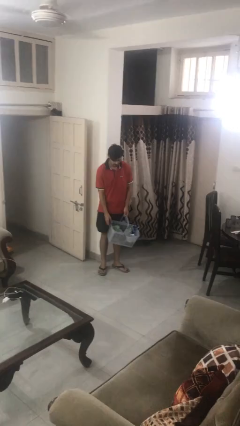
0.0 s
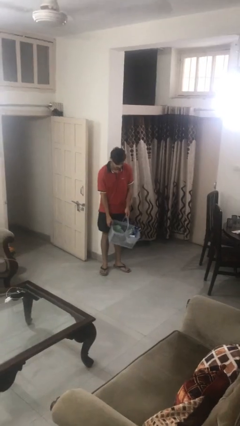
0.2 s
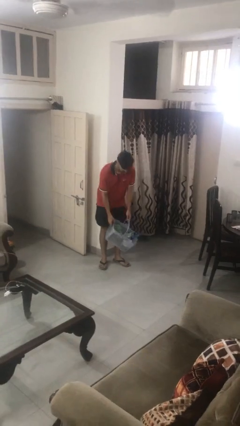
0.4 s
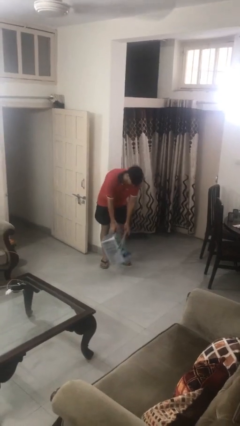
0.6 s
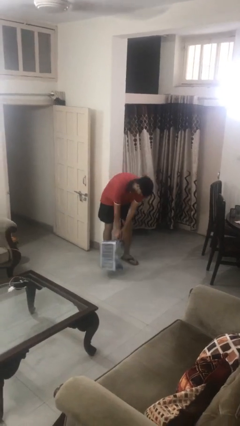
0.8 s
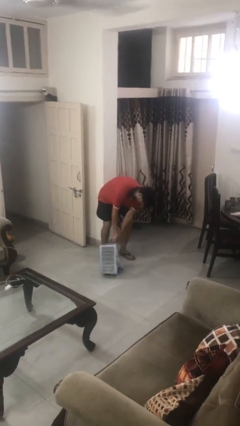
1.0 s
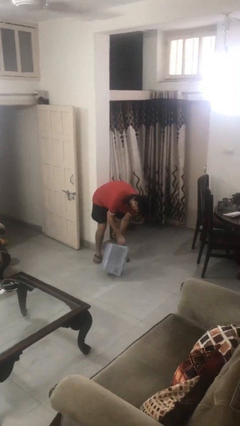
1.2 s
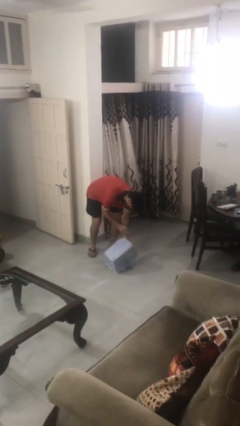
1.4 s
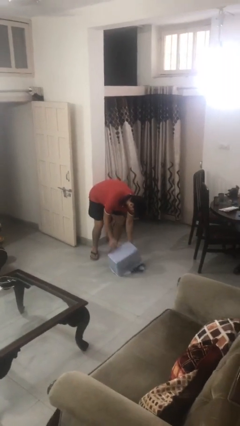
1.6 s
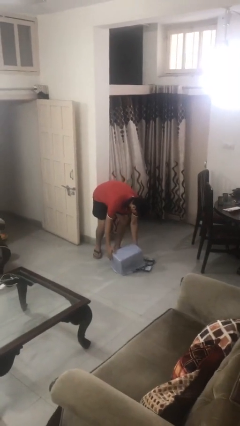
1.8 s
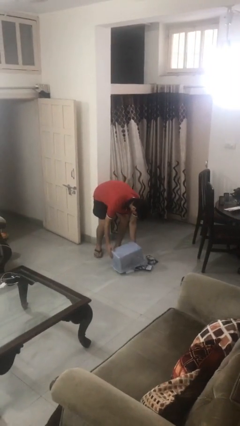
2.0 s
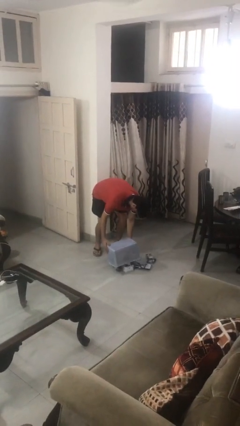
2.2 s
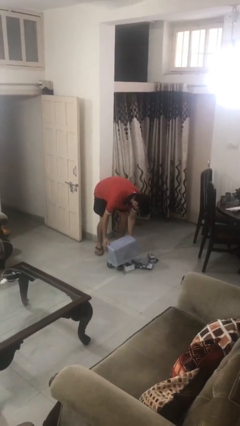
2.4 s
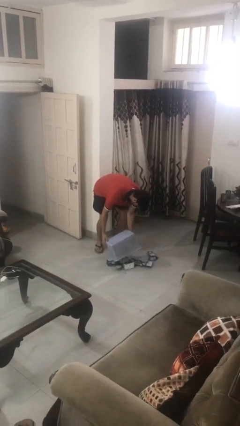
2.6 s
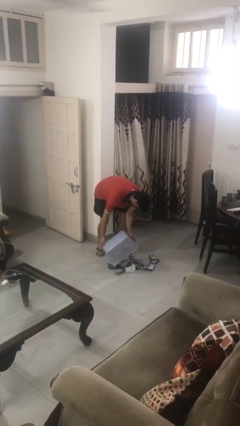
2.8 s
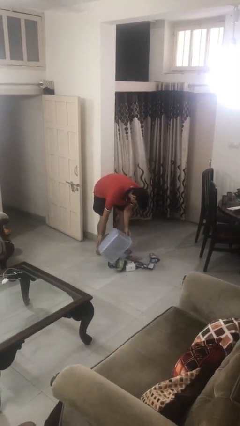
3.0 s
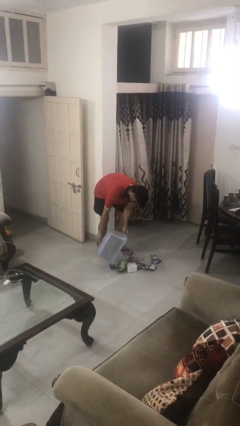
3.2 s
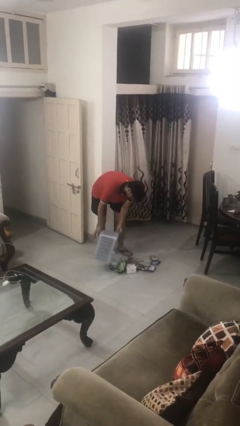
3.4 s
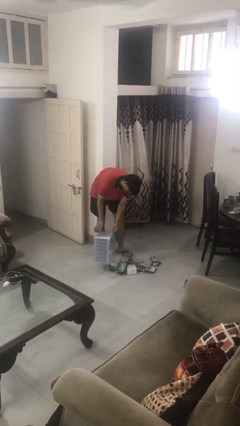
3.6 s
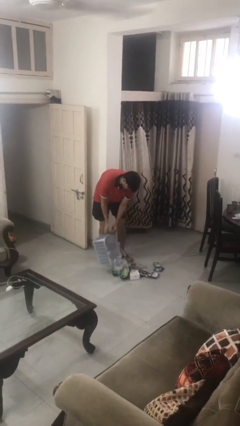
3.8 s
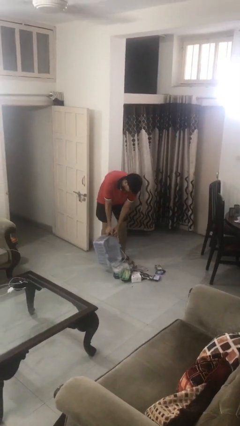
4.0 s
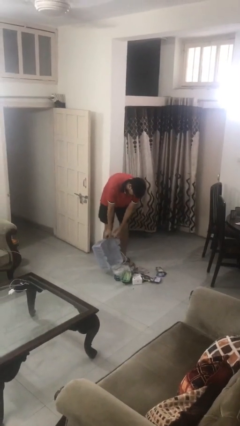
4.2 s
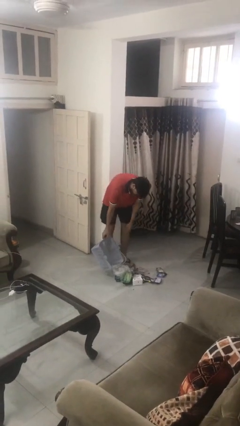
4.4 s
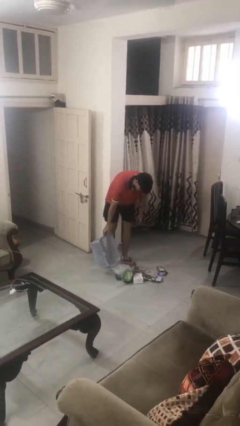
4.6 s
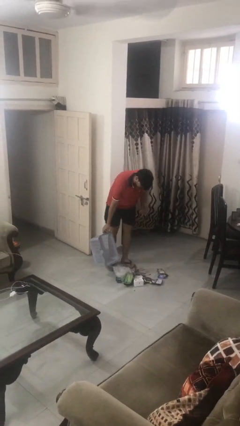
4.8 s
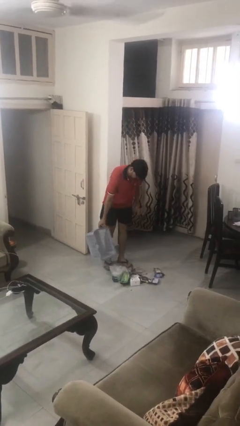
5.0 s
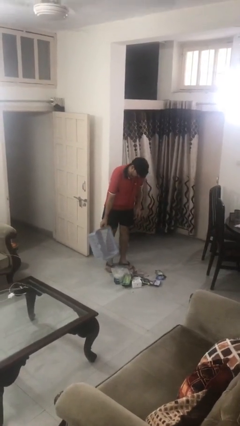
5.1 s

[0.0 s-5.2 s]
person unloads box onto floor

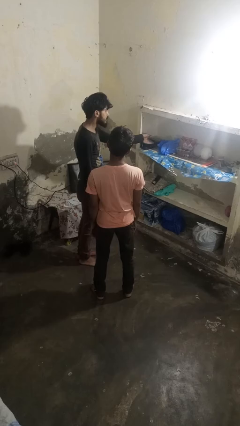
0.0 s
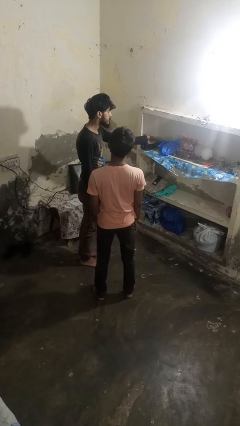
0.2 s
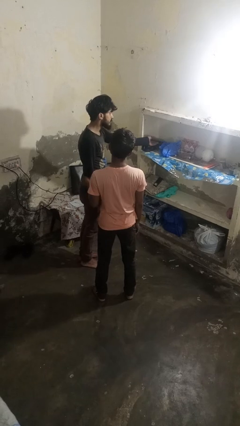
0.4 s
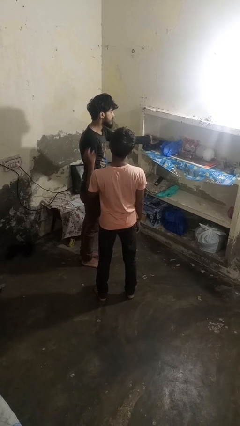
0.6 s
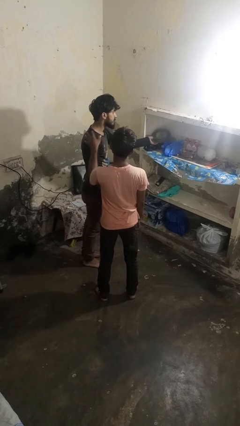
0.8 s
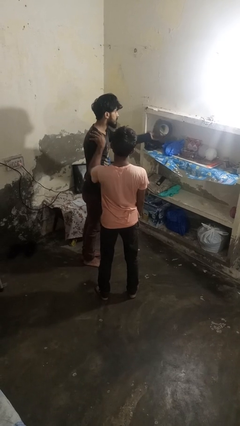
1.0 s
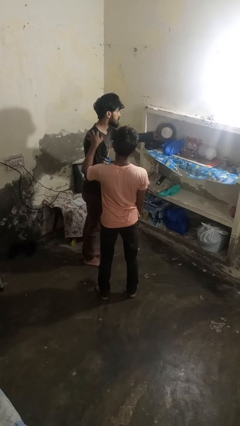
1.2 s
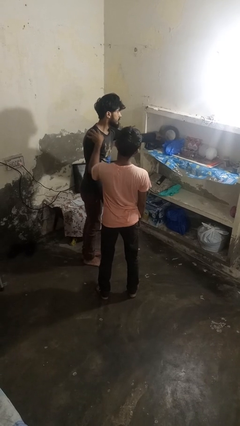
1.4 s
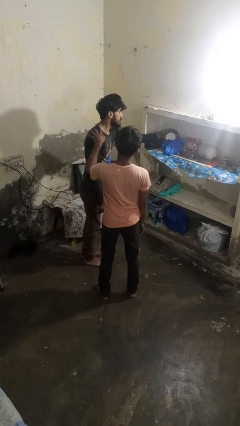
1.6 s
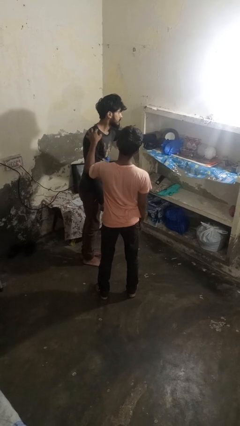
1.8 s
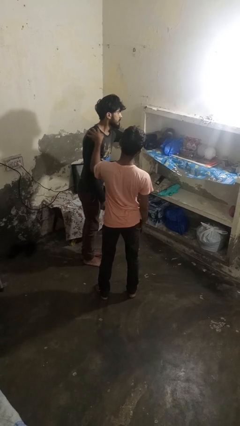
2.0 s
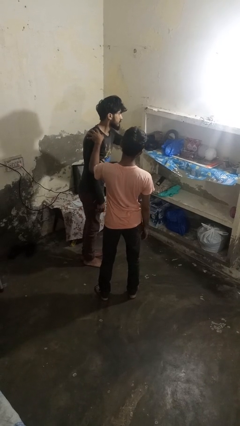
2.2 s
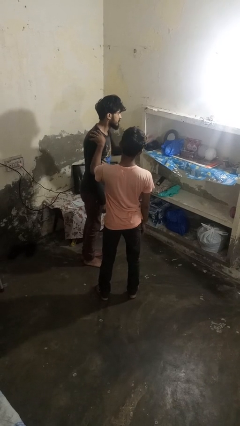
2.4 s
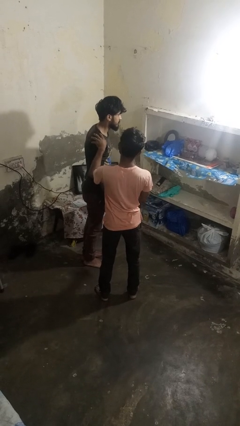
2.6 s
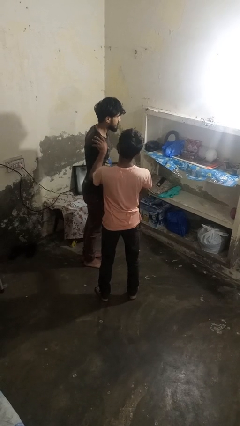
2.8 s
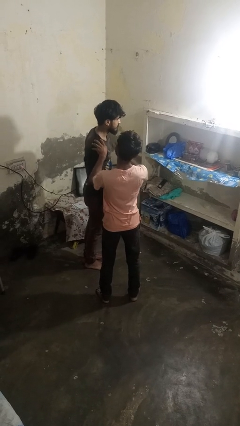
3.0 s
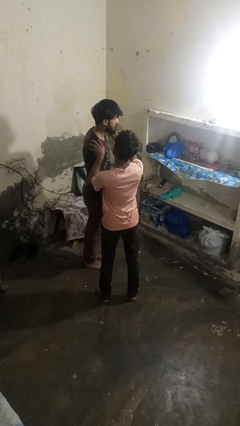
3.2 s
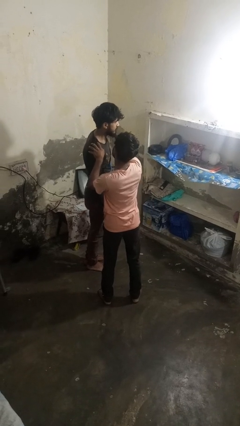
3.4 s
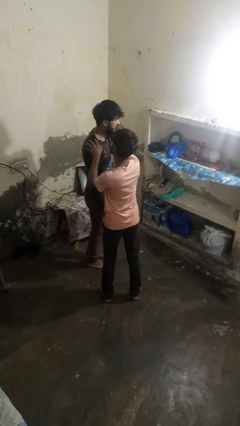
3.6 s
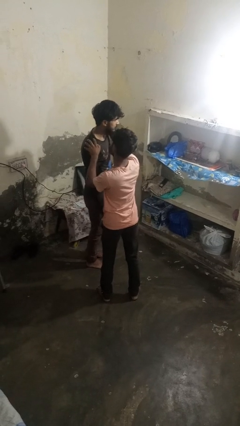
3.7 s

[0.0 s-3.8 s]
person grabs person by shoulder

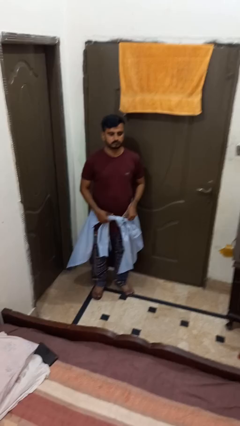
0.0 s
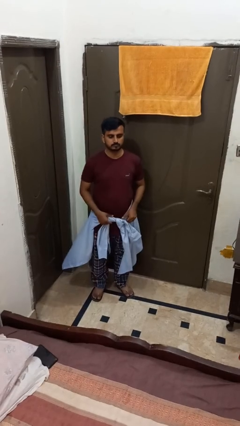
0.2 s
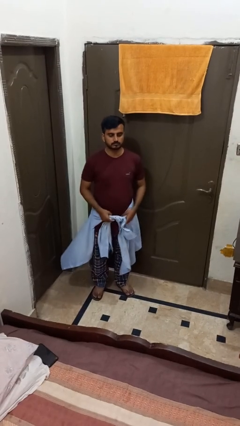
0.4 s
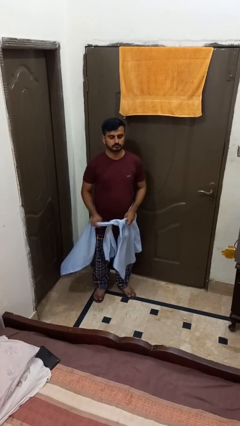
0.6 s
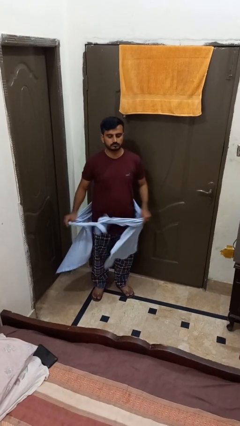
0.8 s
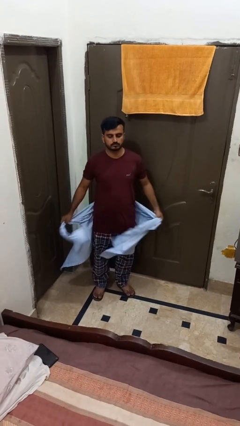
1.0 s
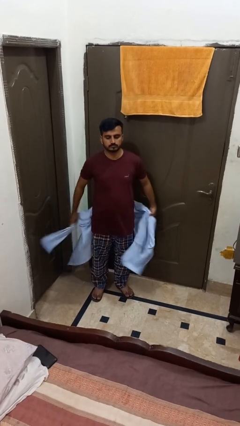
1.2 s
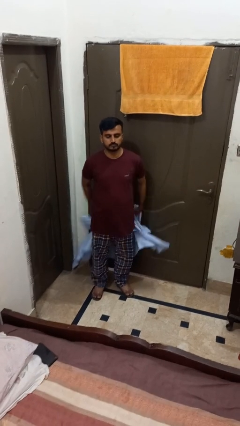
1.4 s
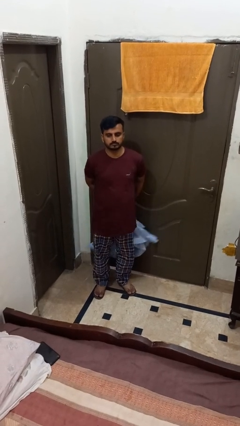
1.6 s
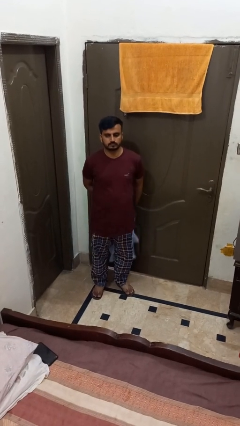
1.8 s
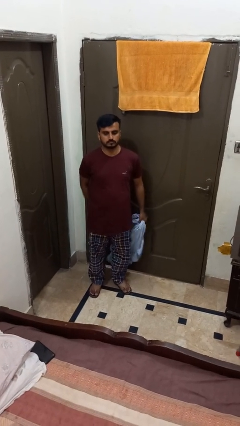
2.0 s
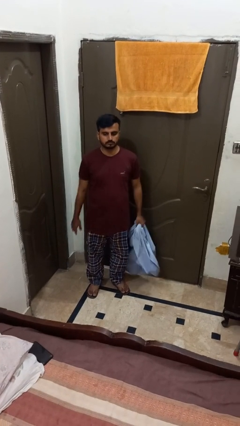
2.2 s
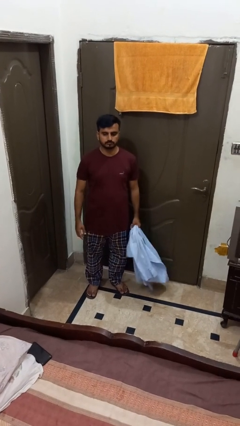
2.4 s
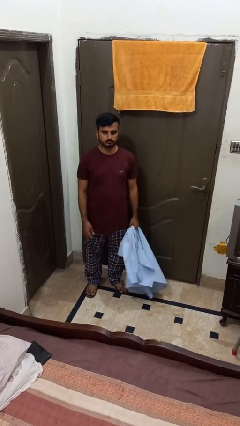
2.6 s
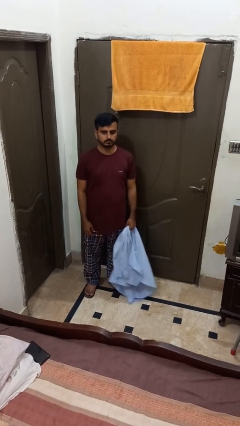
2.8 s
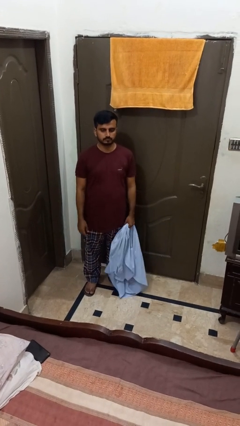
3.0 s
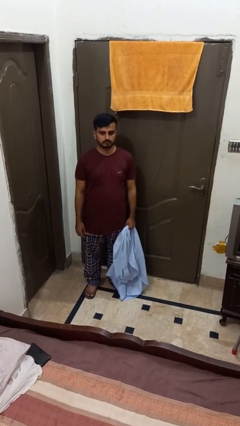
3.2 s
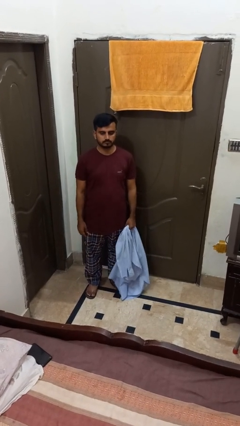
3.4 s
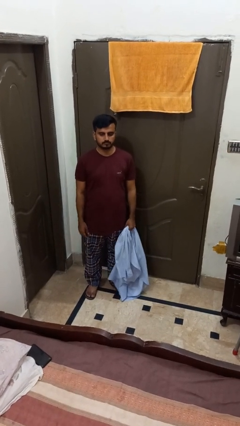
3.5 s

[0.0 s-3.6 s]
person unties jacket around waist
